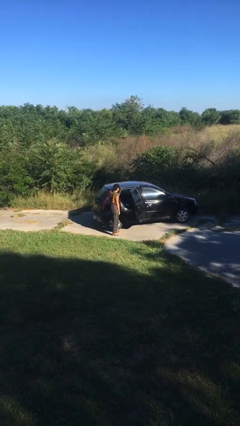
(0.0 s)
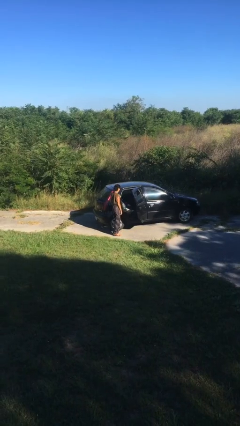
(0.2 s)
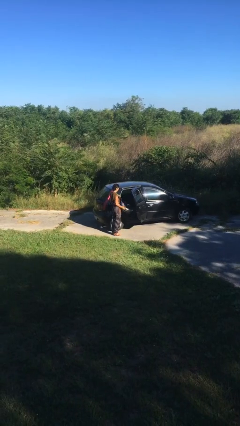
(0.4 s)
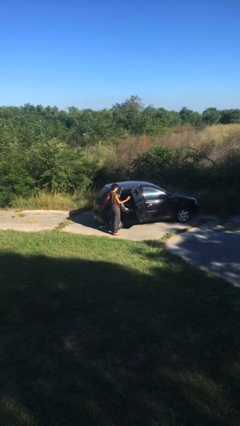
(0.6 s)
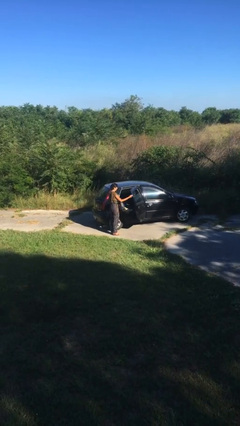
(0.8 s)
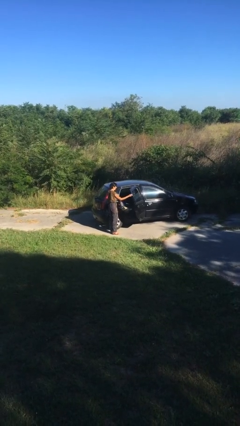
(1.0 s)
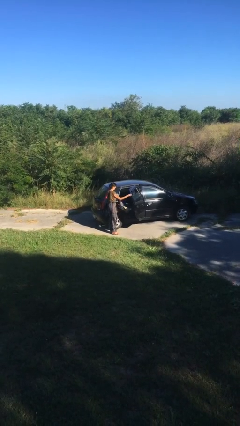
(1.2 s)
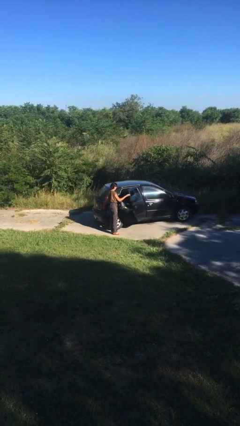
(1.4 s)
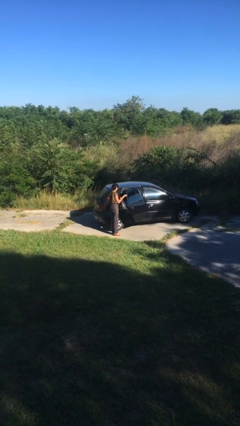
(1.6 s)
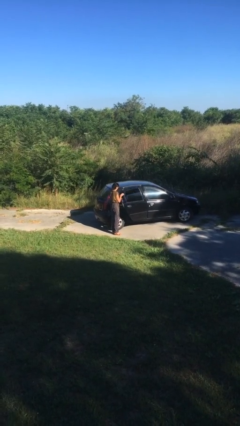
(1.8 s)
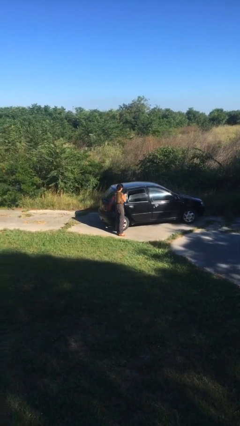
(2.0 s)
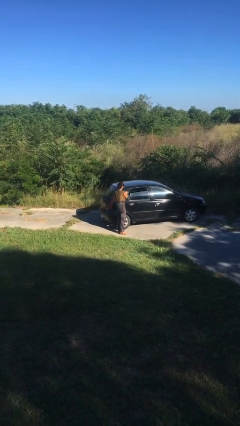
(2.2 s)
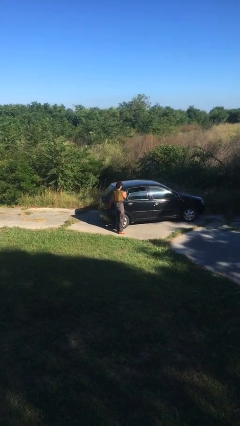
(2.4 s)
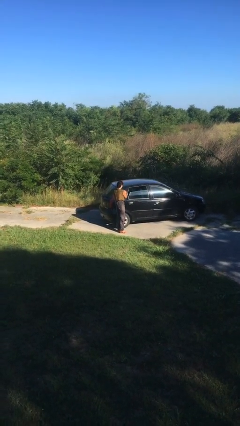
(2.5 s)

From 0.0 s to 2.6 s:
person closes car door

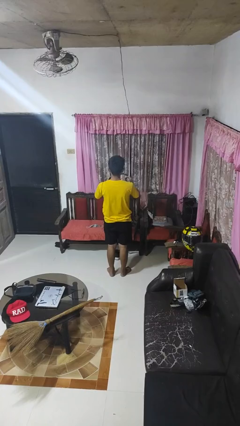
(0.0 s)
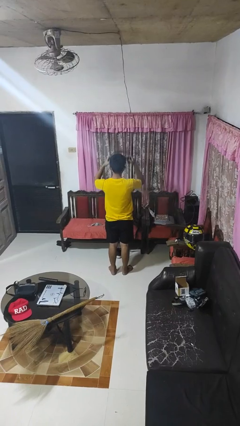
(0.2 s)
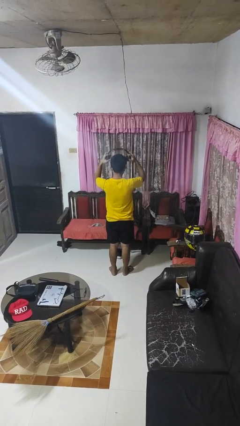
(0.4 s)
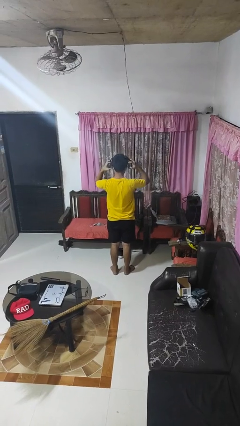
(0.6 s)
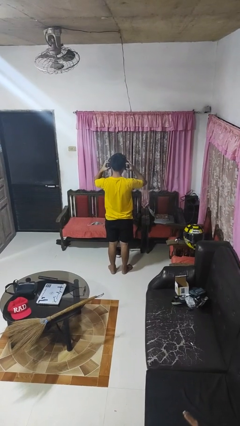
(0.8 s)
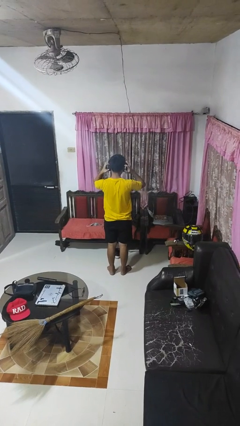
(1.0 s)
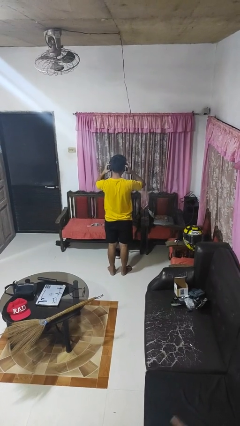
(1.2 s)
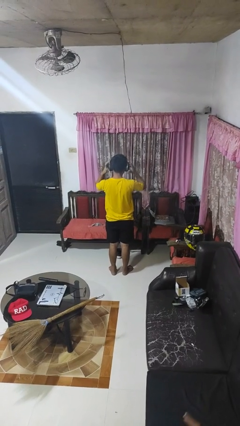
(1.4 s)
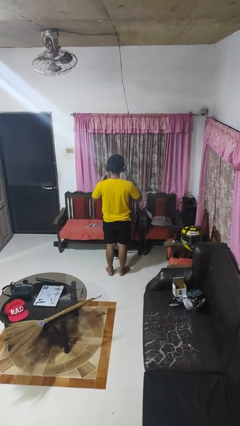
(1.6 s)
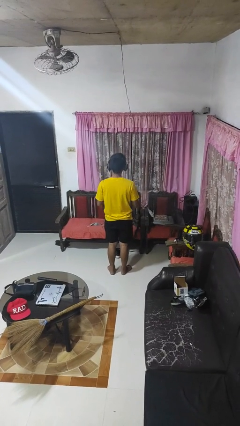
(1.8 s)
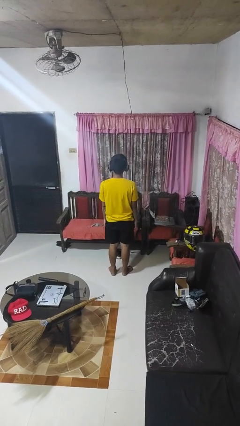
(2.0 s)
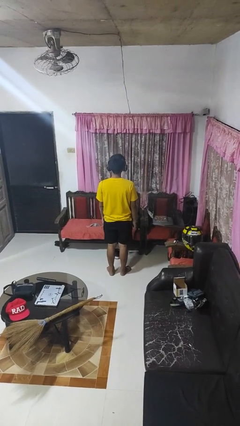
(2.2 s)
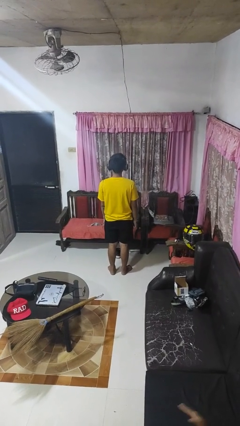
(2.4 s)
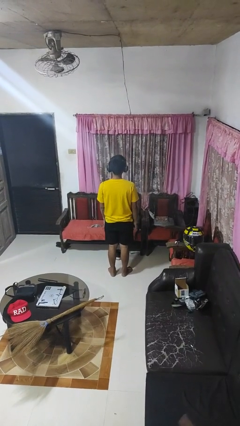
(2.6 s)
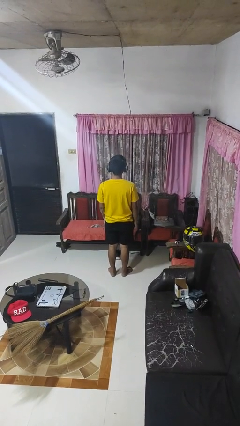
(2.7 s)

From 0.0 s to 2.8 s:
person puts on headphones

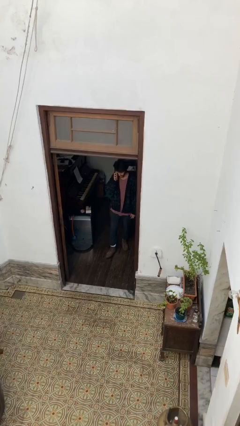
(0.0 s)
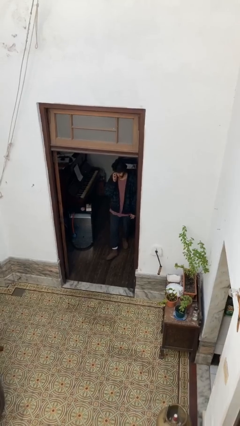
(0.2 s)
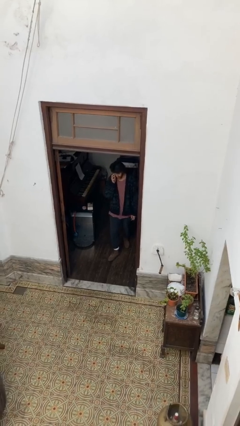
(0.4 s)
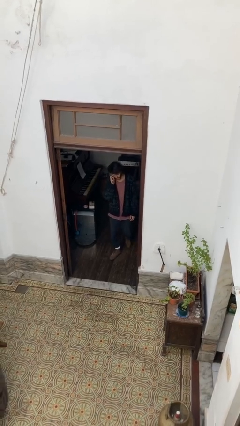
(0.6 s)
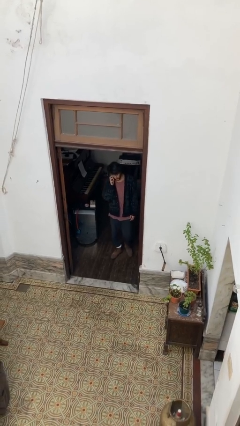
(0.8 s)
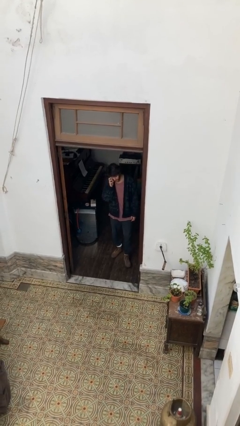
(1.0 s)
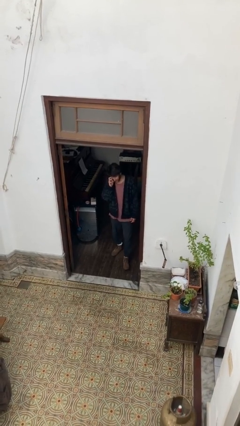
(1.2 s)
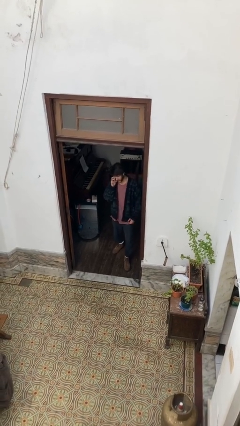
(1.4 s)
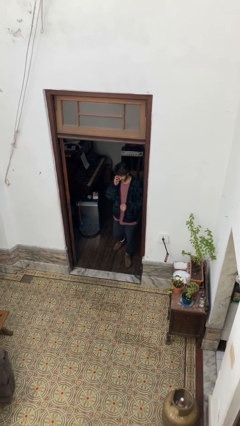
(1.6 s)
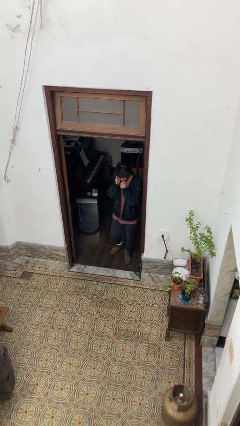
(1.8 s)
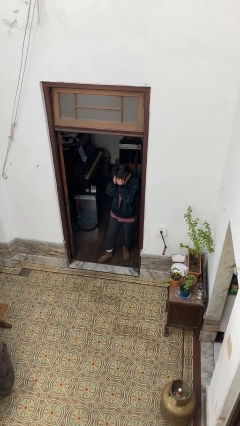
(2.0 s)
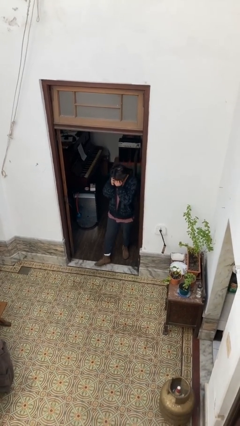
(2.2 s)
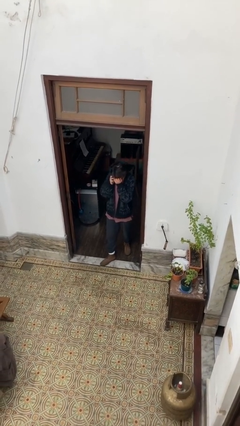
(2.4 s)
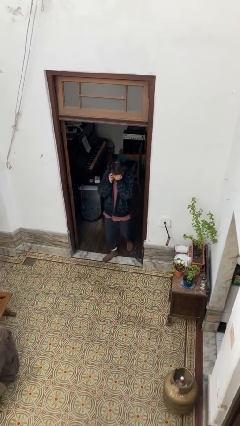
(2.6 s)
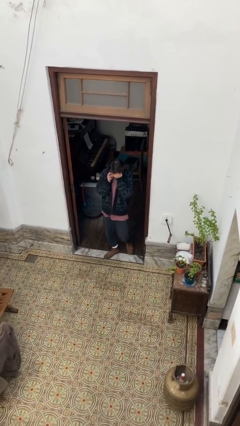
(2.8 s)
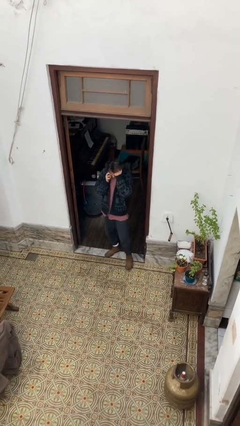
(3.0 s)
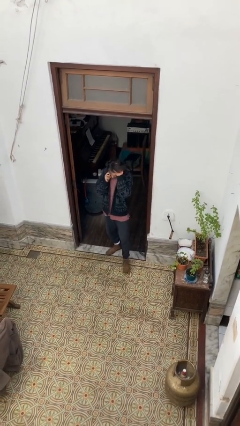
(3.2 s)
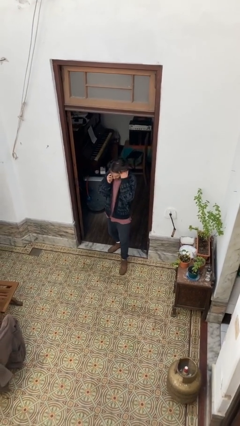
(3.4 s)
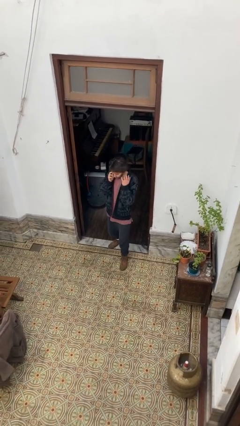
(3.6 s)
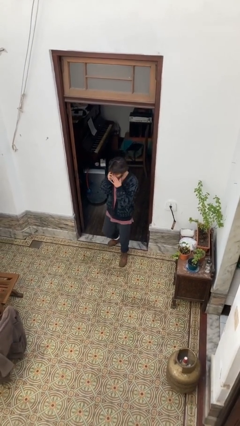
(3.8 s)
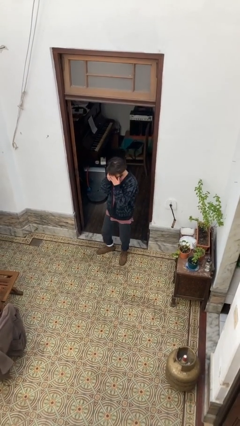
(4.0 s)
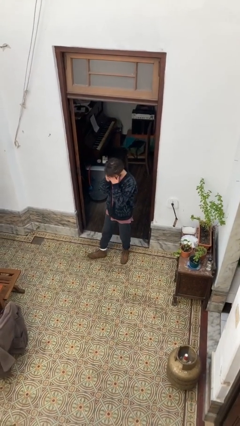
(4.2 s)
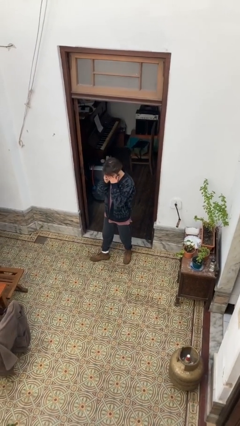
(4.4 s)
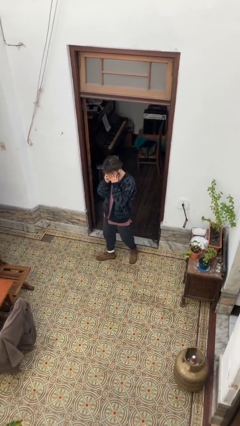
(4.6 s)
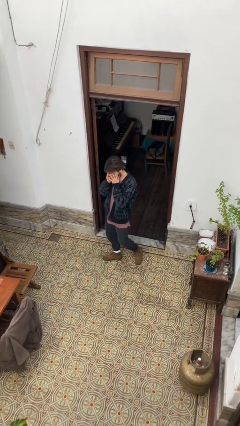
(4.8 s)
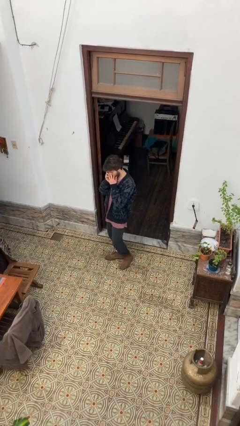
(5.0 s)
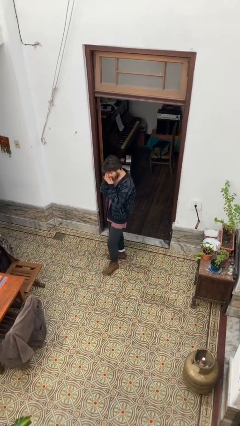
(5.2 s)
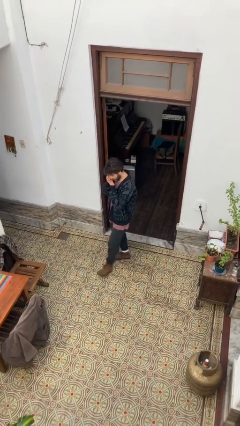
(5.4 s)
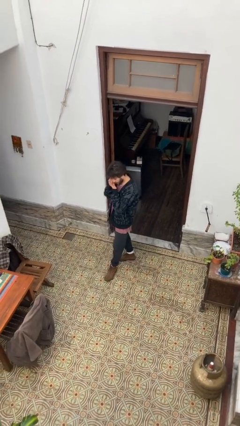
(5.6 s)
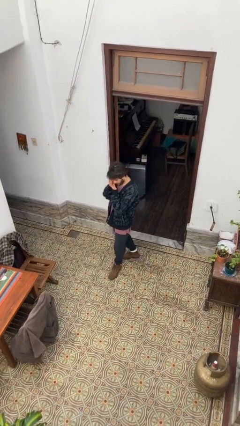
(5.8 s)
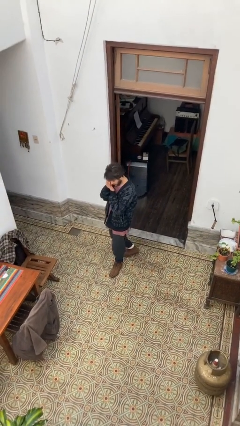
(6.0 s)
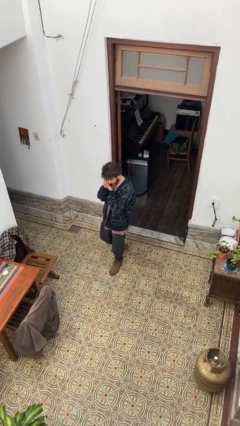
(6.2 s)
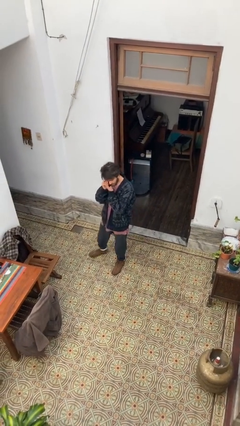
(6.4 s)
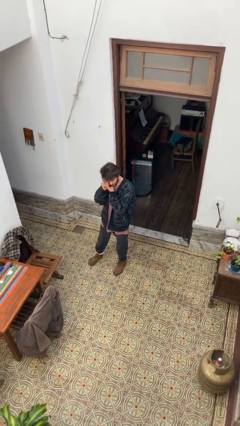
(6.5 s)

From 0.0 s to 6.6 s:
person enters scene through structure

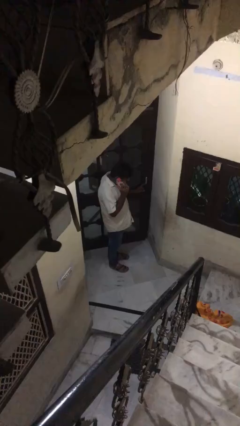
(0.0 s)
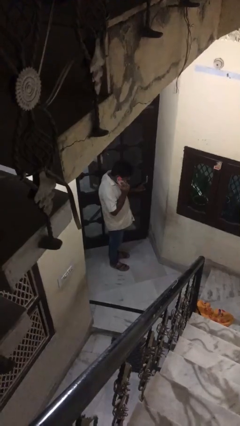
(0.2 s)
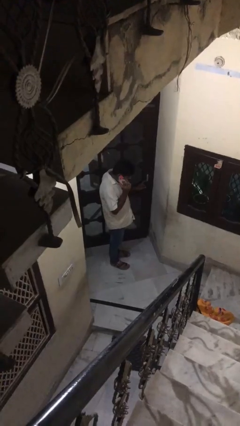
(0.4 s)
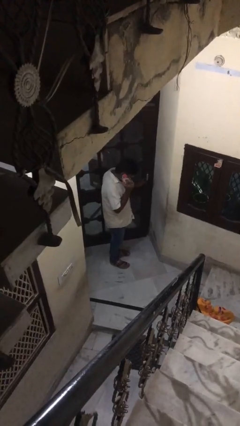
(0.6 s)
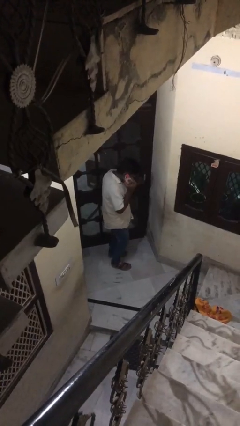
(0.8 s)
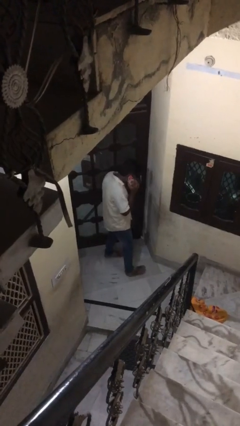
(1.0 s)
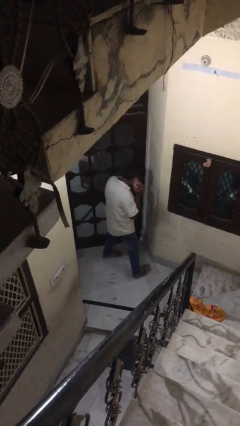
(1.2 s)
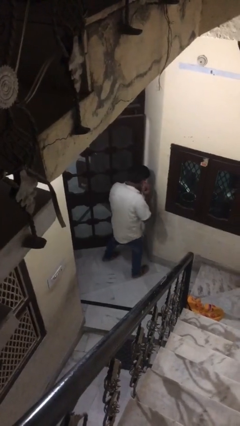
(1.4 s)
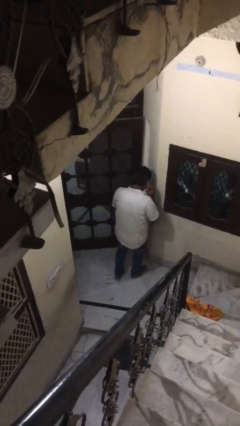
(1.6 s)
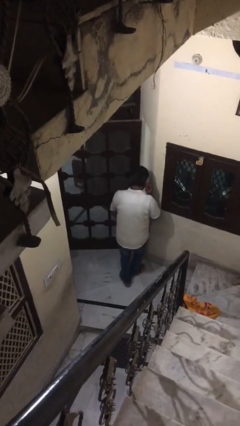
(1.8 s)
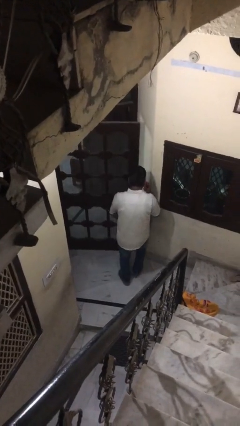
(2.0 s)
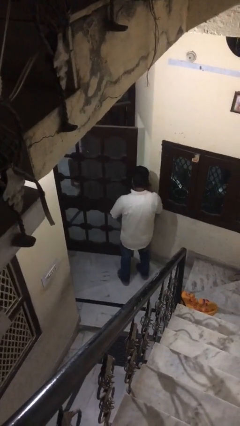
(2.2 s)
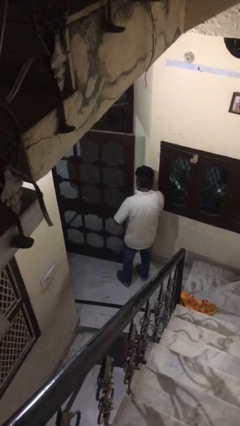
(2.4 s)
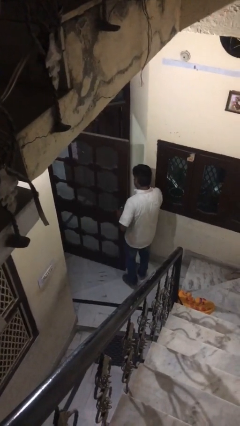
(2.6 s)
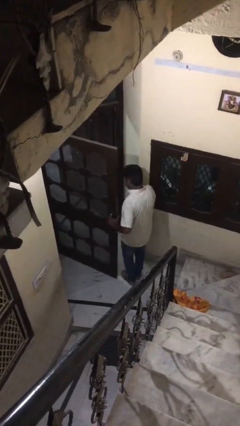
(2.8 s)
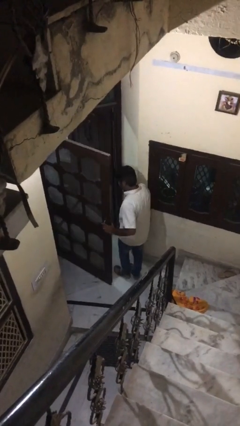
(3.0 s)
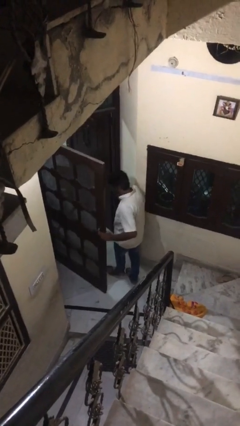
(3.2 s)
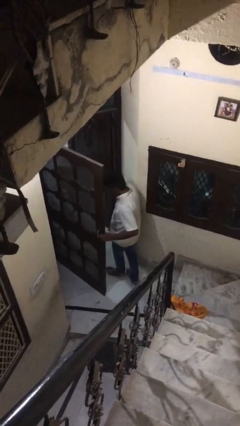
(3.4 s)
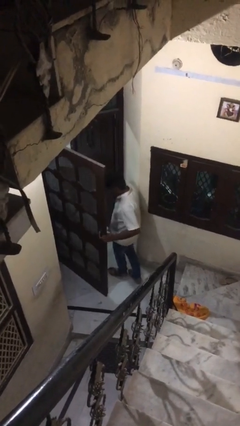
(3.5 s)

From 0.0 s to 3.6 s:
person opens facility door

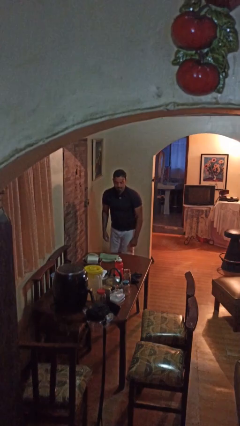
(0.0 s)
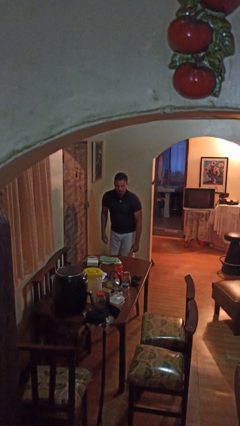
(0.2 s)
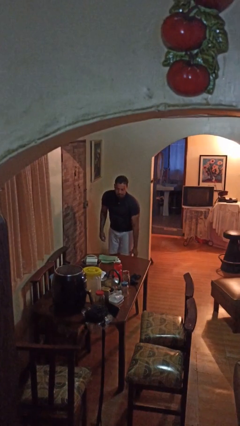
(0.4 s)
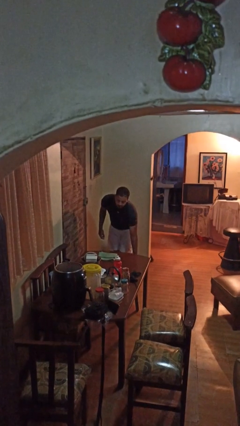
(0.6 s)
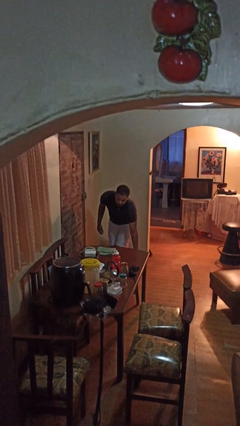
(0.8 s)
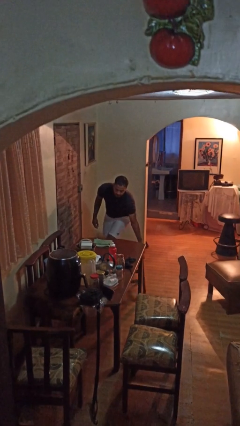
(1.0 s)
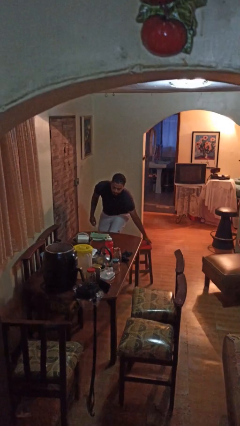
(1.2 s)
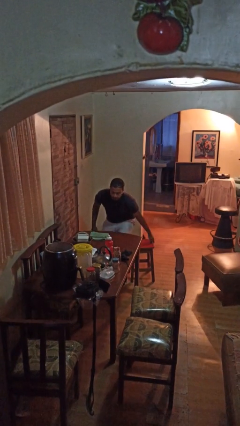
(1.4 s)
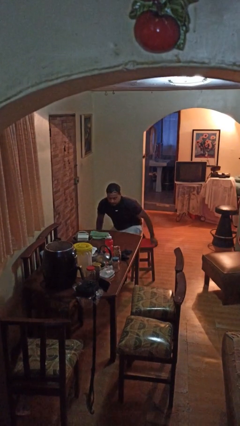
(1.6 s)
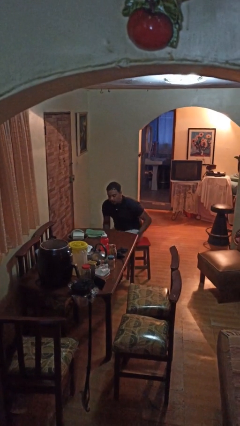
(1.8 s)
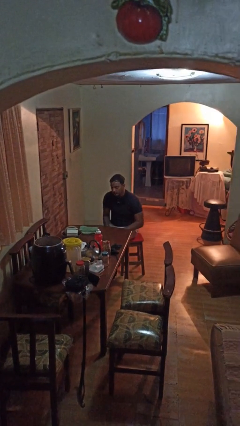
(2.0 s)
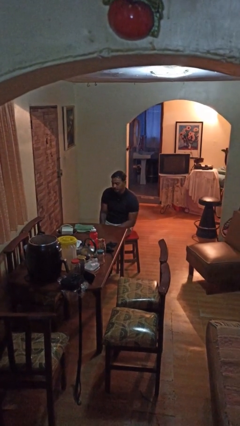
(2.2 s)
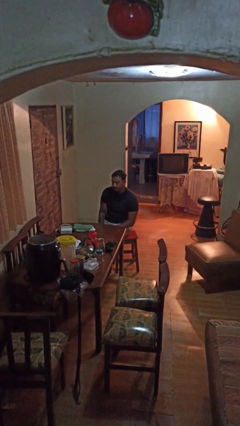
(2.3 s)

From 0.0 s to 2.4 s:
person sits down
